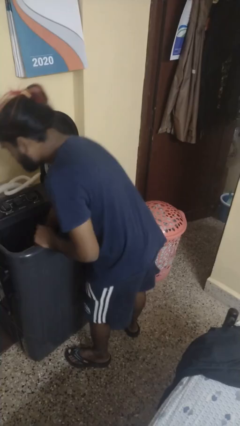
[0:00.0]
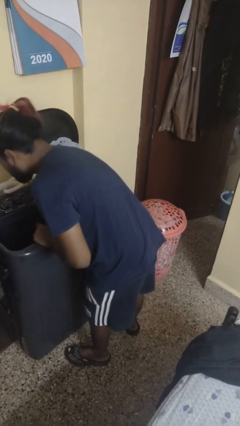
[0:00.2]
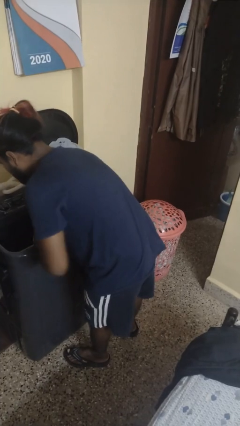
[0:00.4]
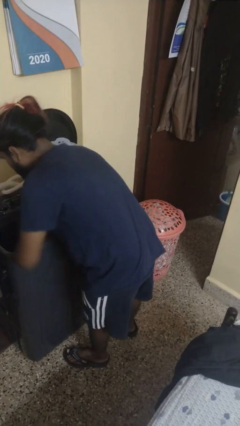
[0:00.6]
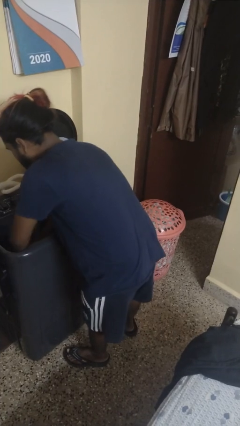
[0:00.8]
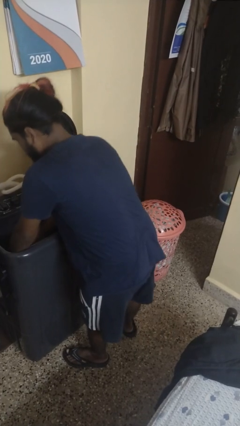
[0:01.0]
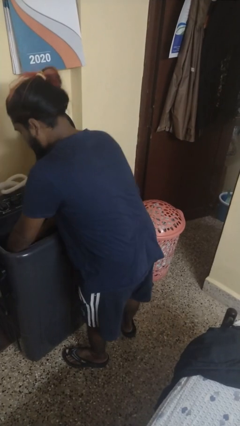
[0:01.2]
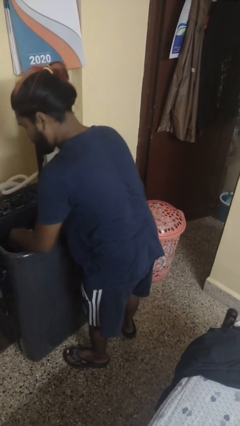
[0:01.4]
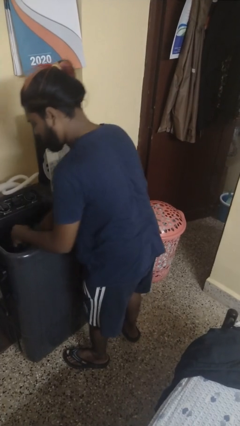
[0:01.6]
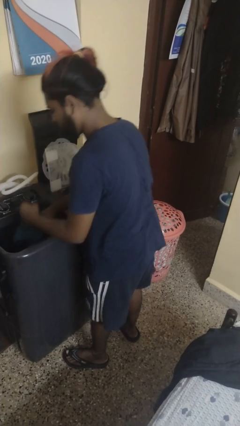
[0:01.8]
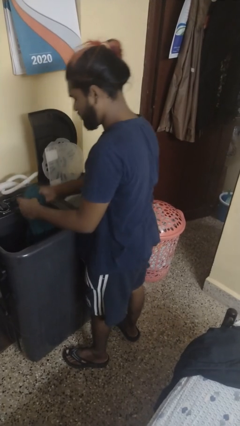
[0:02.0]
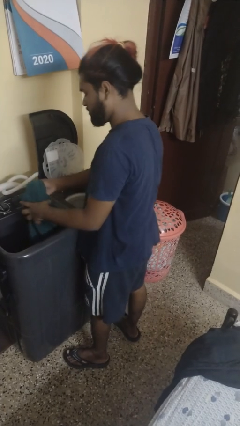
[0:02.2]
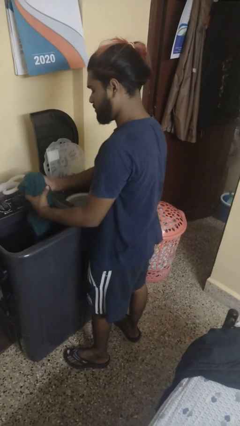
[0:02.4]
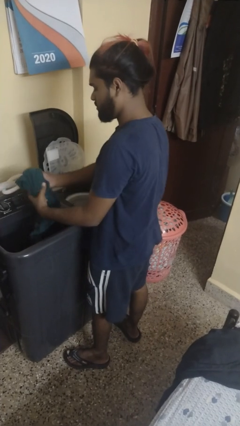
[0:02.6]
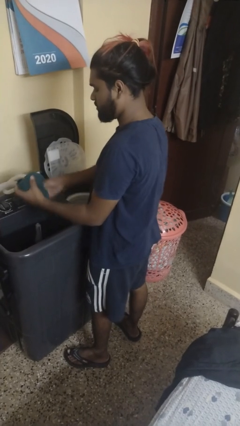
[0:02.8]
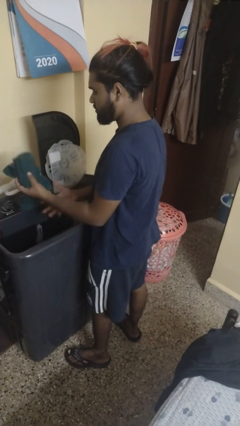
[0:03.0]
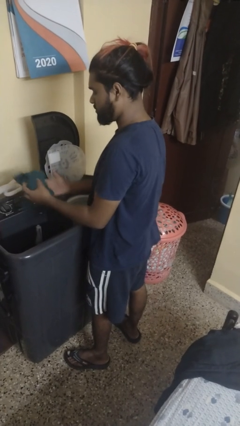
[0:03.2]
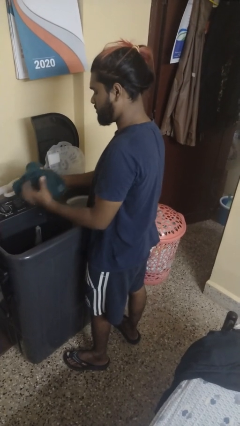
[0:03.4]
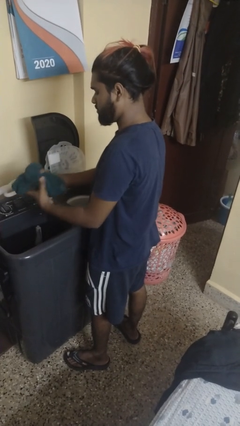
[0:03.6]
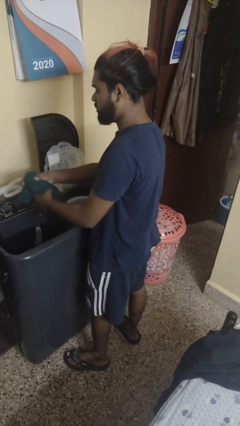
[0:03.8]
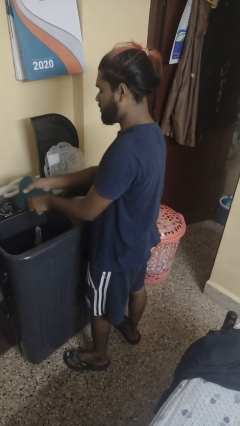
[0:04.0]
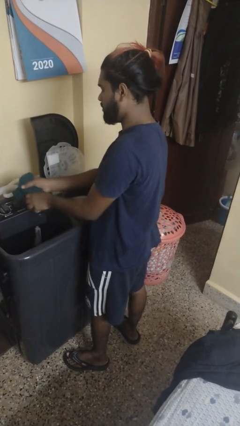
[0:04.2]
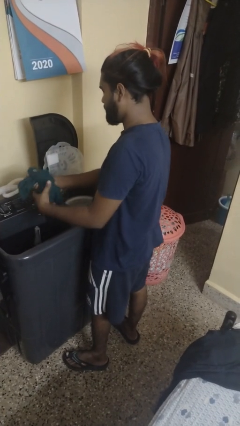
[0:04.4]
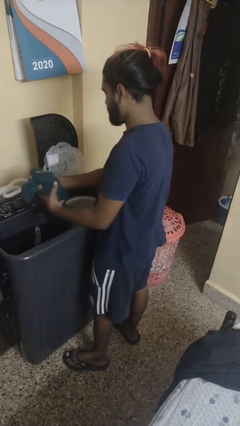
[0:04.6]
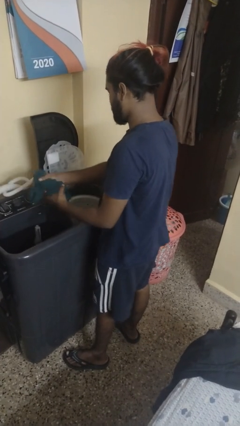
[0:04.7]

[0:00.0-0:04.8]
person unloads clotheswasher

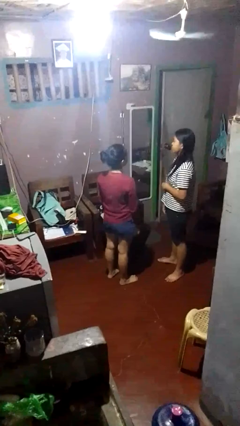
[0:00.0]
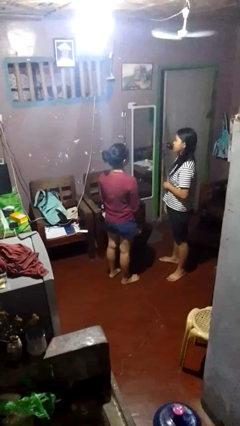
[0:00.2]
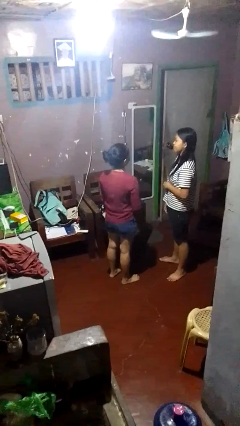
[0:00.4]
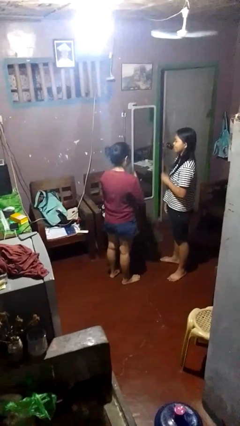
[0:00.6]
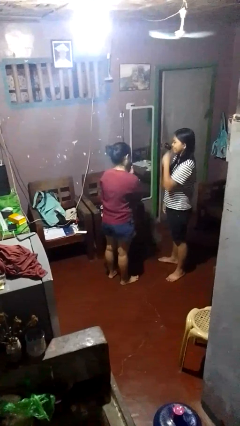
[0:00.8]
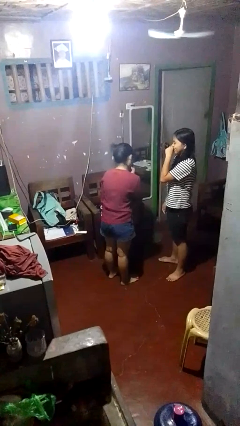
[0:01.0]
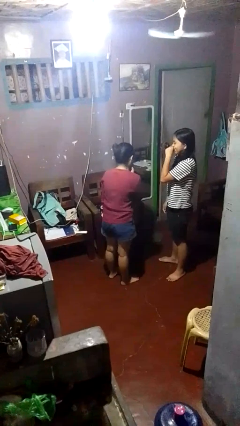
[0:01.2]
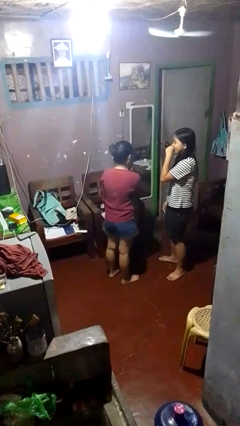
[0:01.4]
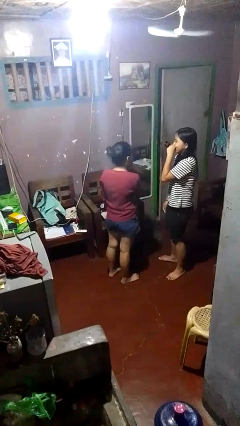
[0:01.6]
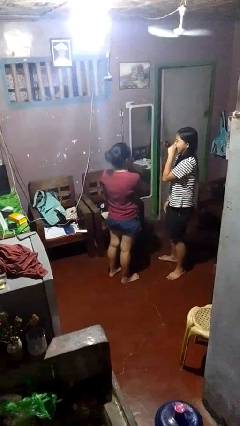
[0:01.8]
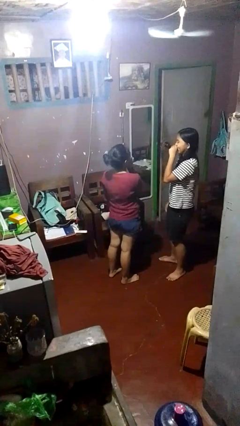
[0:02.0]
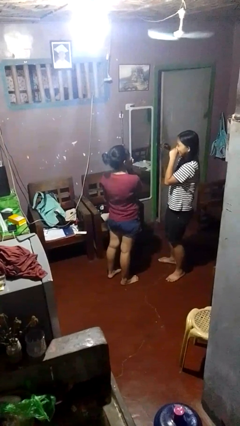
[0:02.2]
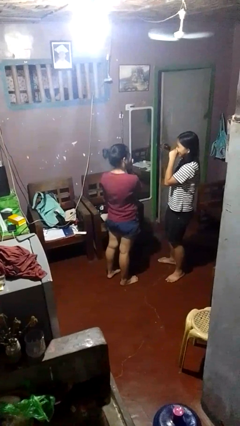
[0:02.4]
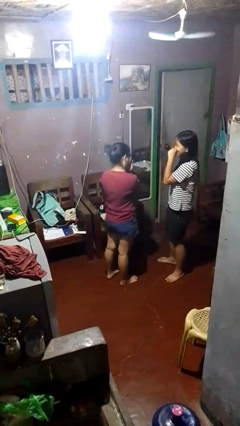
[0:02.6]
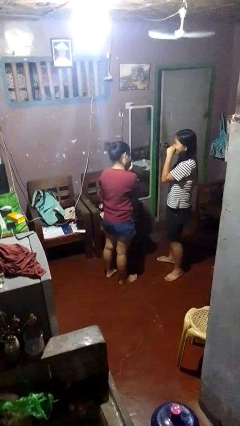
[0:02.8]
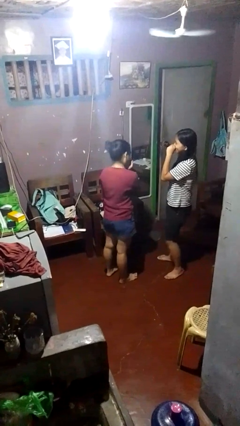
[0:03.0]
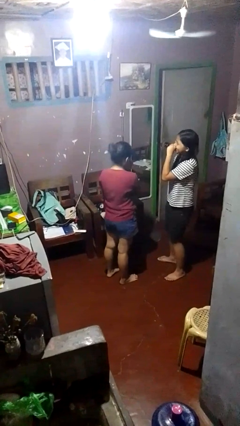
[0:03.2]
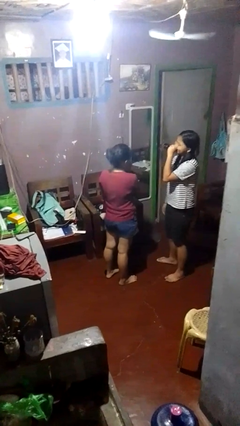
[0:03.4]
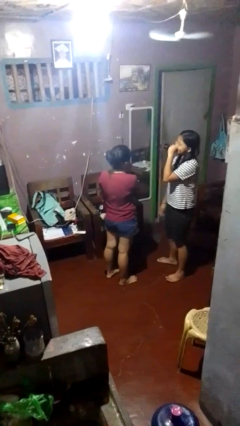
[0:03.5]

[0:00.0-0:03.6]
person laughs with person

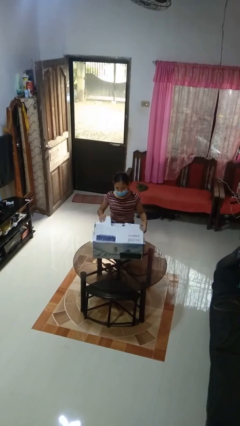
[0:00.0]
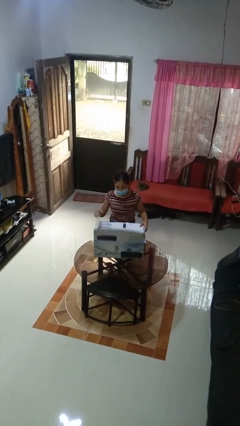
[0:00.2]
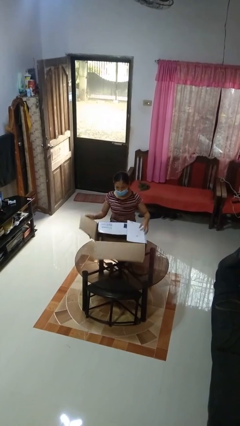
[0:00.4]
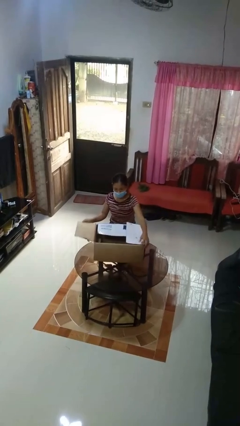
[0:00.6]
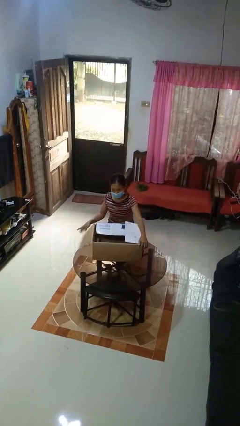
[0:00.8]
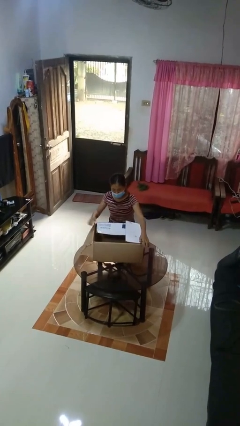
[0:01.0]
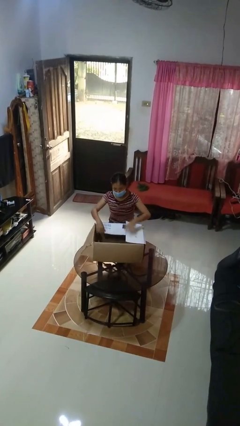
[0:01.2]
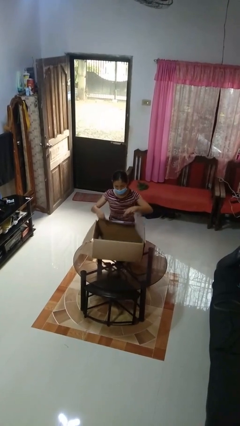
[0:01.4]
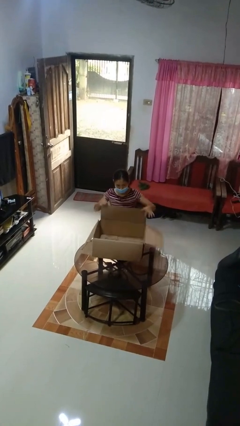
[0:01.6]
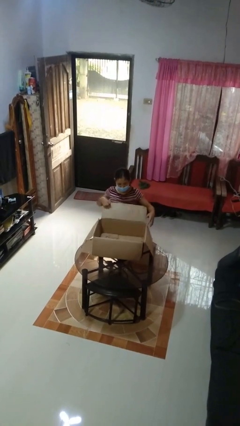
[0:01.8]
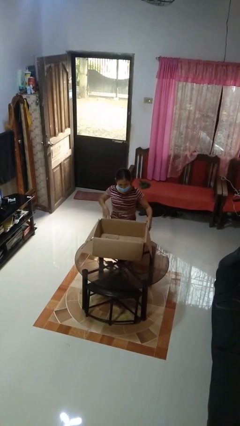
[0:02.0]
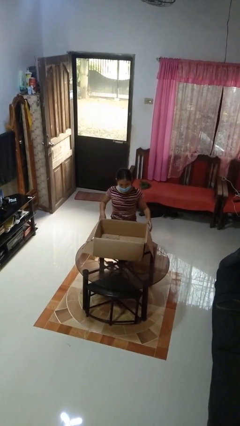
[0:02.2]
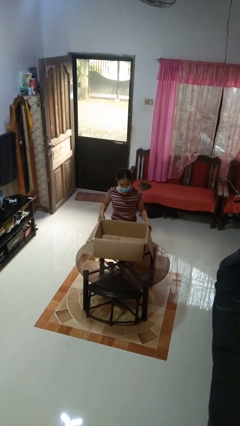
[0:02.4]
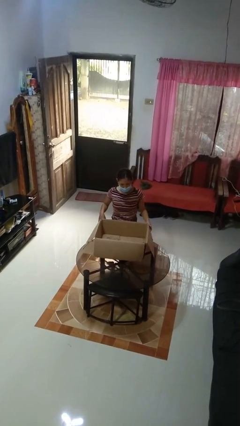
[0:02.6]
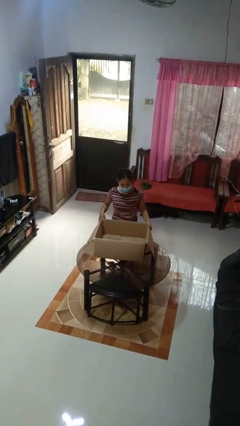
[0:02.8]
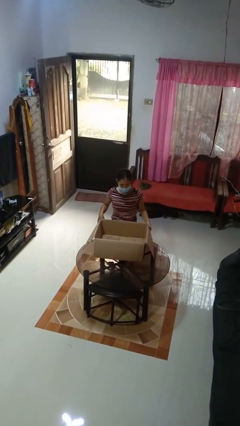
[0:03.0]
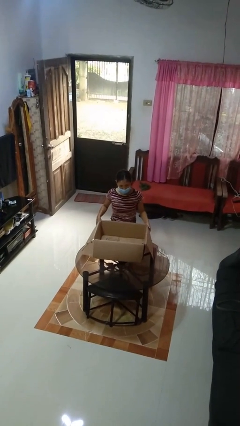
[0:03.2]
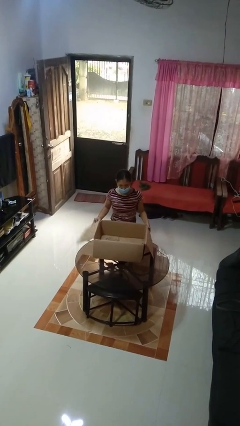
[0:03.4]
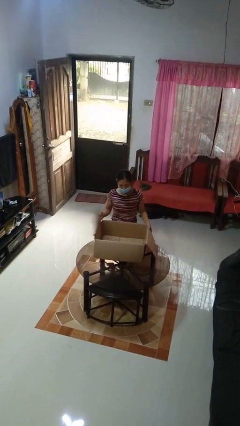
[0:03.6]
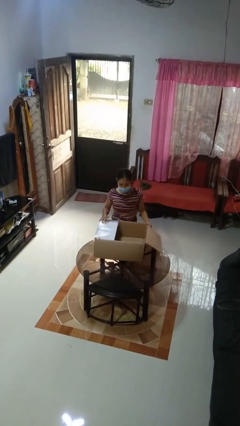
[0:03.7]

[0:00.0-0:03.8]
person opens box

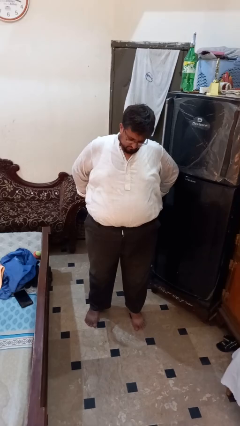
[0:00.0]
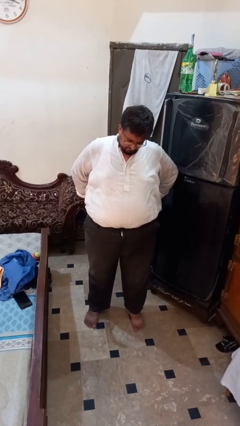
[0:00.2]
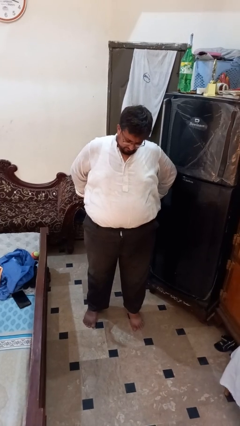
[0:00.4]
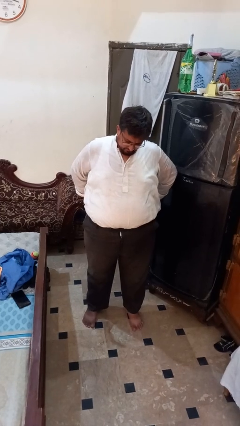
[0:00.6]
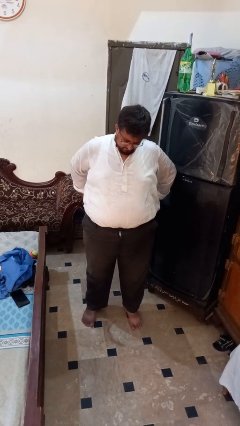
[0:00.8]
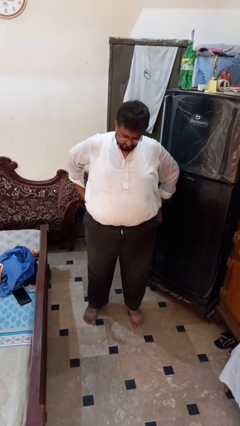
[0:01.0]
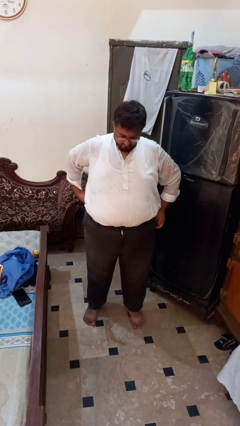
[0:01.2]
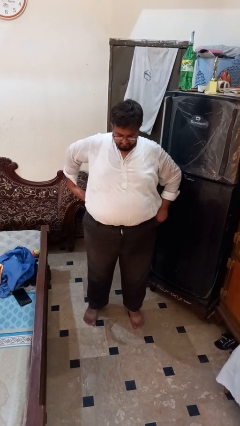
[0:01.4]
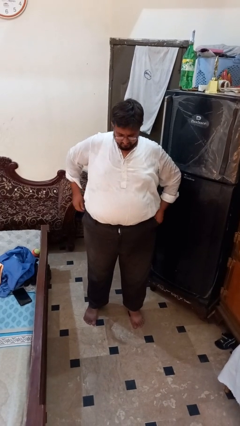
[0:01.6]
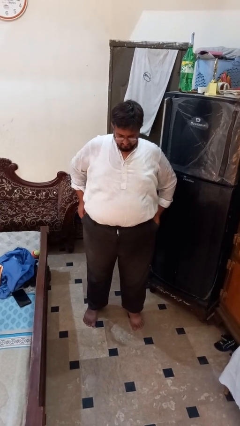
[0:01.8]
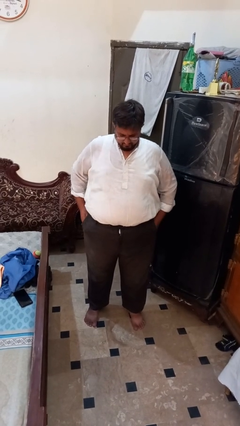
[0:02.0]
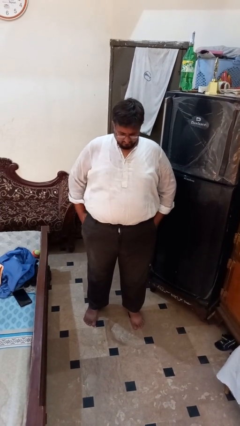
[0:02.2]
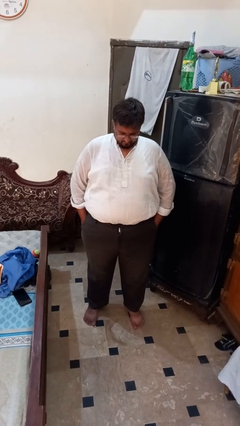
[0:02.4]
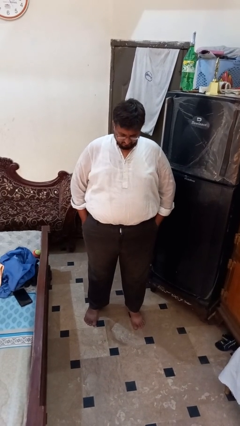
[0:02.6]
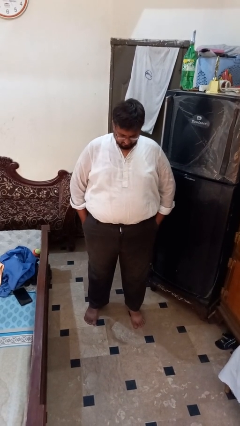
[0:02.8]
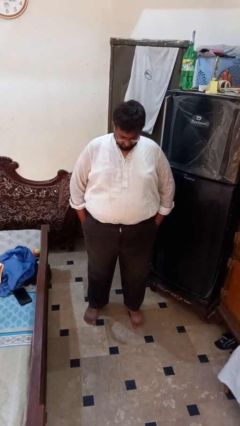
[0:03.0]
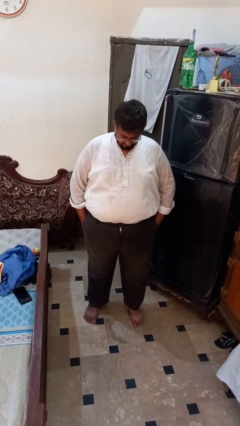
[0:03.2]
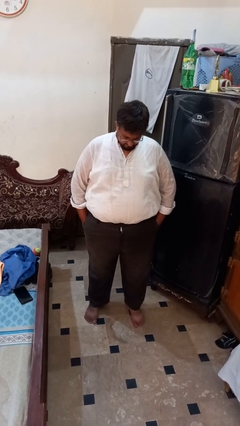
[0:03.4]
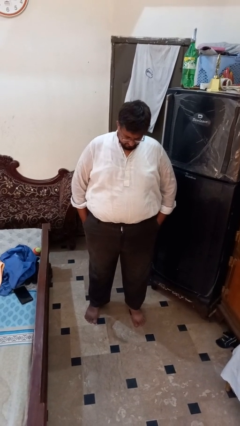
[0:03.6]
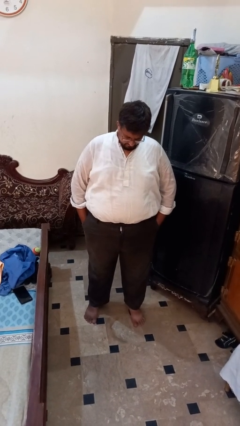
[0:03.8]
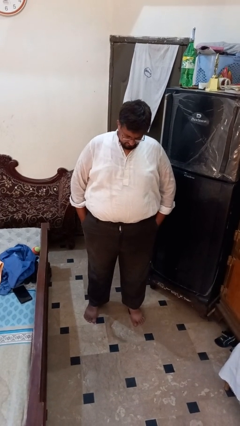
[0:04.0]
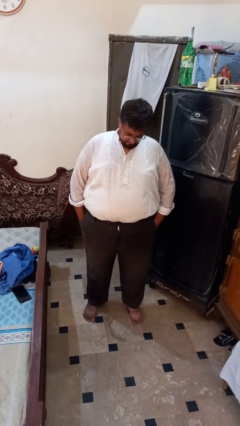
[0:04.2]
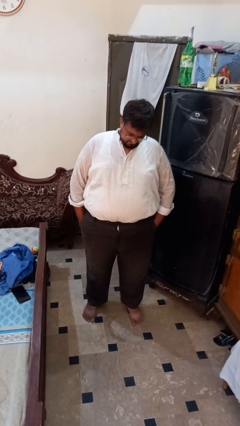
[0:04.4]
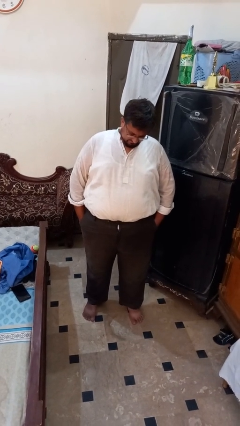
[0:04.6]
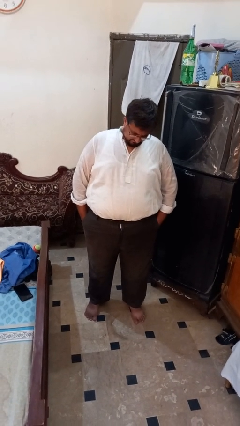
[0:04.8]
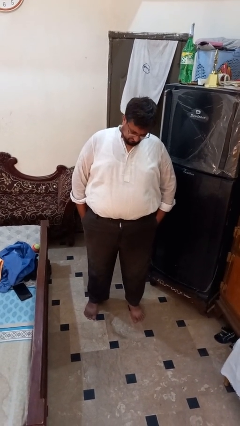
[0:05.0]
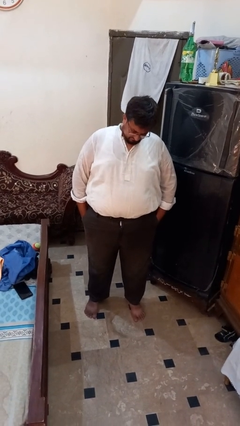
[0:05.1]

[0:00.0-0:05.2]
person puts hands in back pockets
